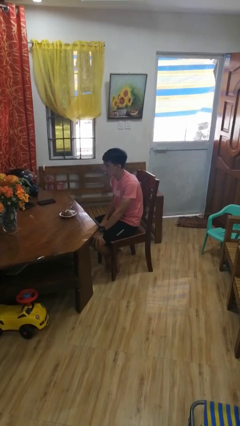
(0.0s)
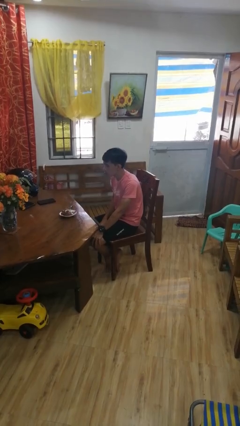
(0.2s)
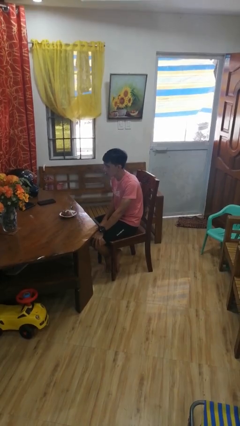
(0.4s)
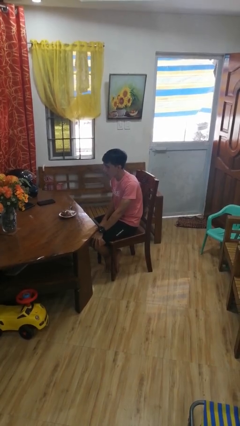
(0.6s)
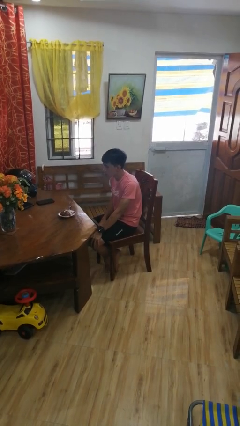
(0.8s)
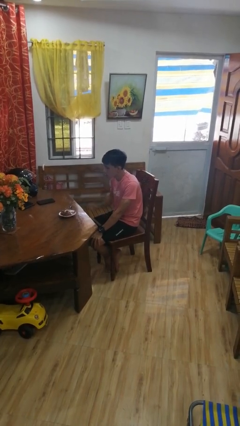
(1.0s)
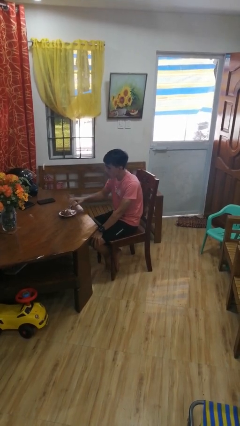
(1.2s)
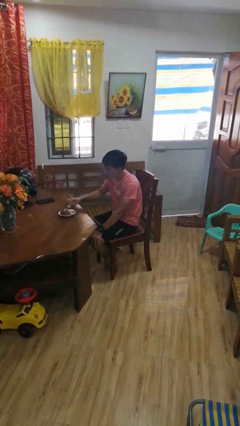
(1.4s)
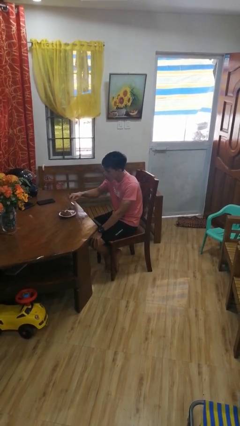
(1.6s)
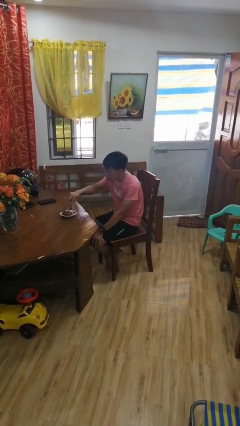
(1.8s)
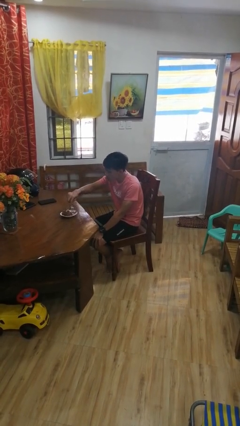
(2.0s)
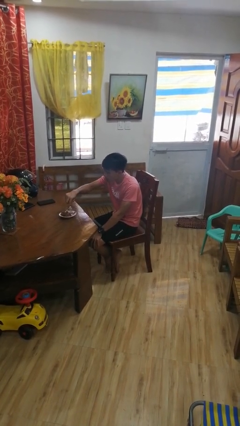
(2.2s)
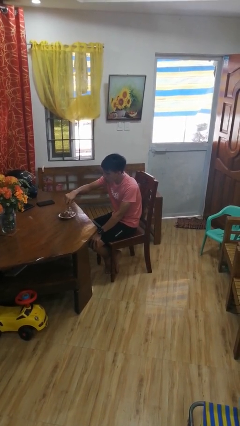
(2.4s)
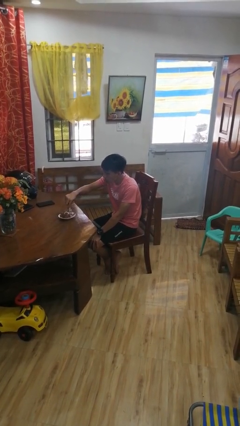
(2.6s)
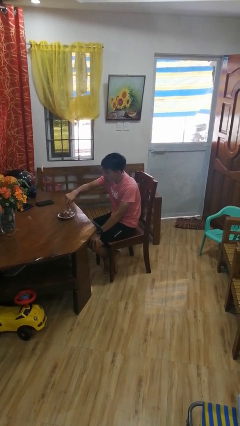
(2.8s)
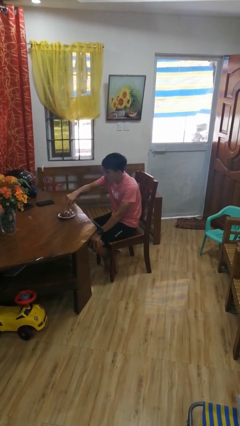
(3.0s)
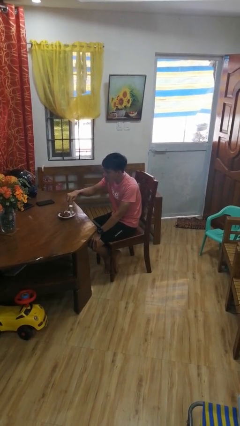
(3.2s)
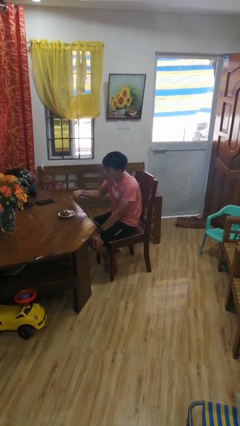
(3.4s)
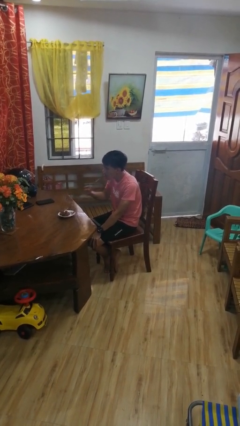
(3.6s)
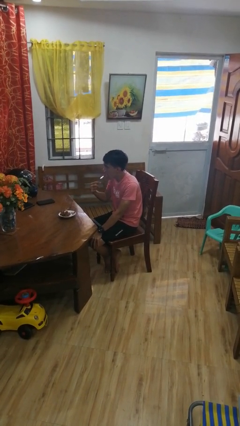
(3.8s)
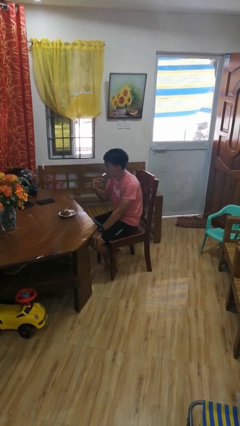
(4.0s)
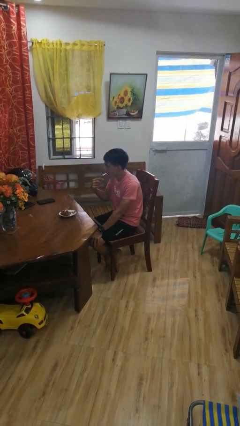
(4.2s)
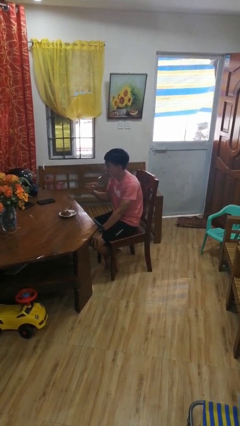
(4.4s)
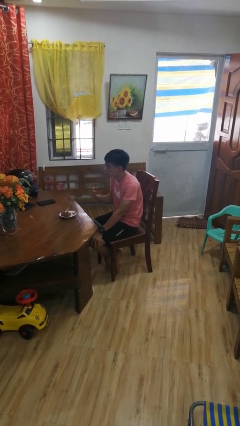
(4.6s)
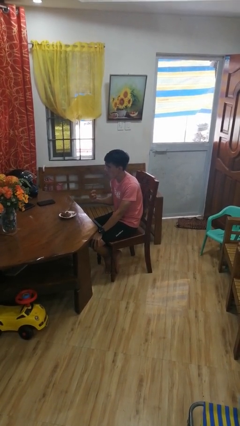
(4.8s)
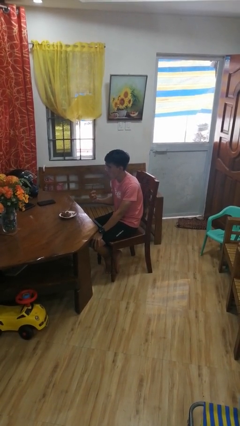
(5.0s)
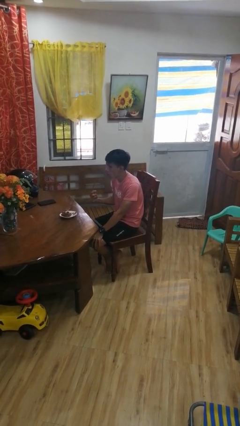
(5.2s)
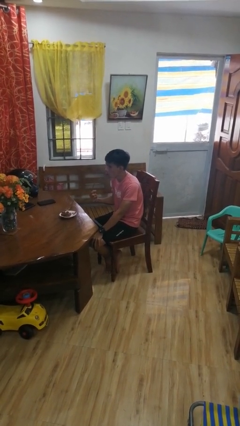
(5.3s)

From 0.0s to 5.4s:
person eats with utensil

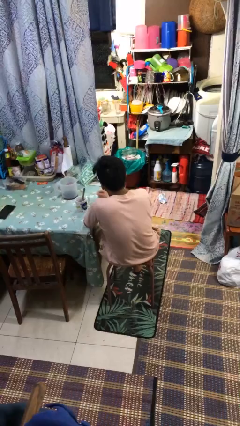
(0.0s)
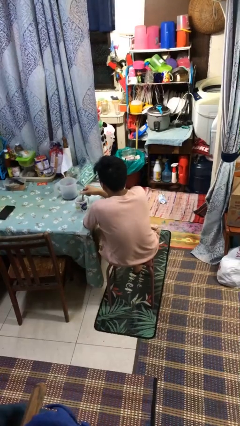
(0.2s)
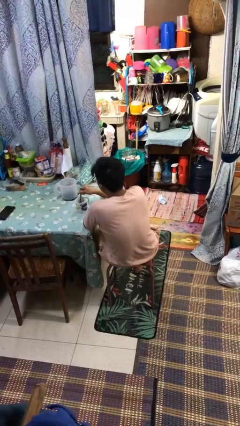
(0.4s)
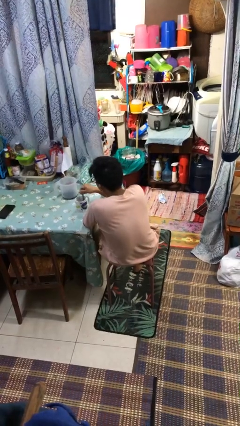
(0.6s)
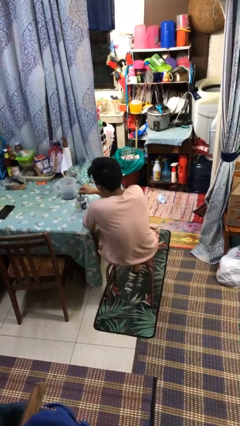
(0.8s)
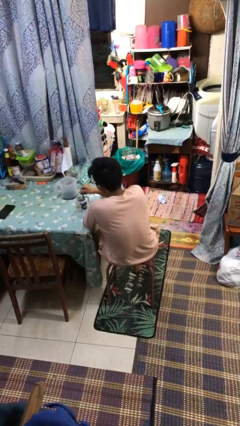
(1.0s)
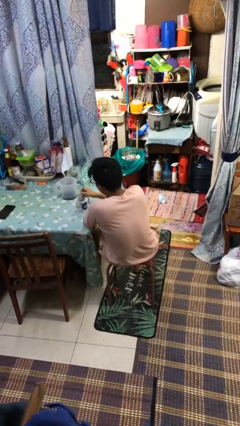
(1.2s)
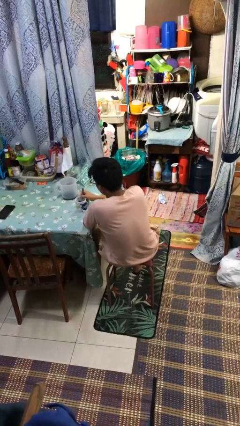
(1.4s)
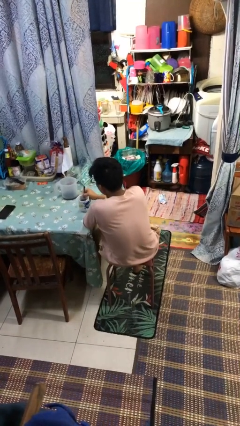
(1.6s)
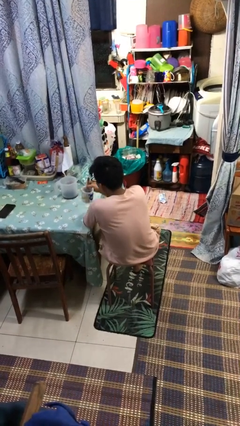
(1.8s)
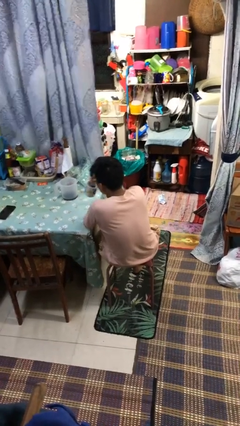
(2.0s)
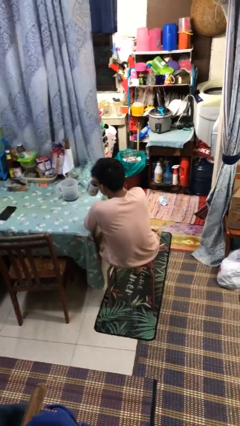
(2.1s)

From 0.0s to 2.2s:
person stirs mug

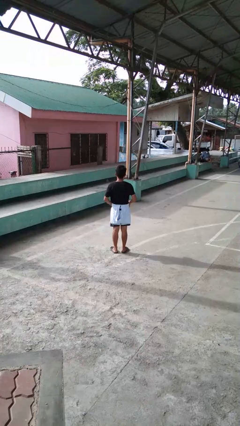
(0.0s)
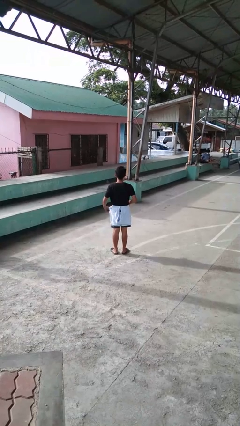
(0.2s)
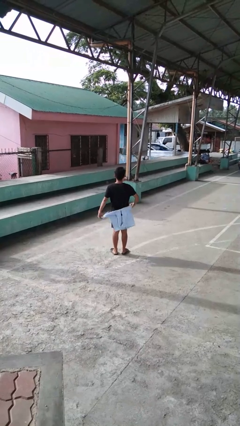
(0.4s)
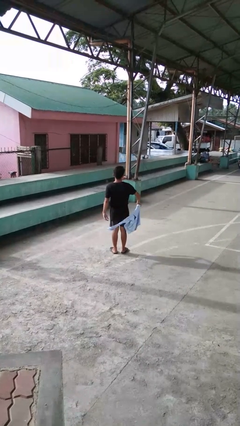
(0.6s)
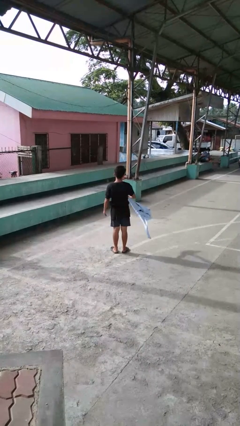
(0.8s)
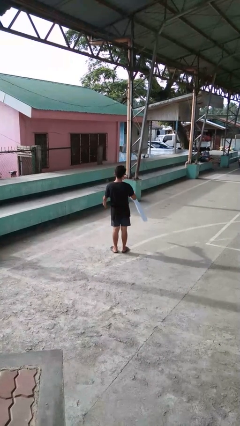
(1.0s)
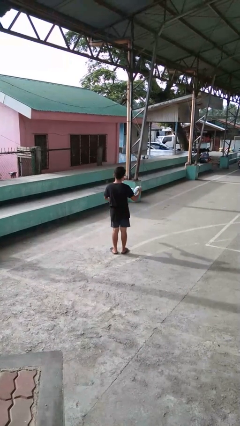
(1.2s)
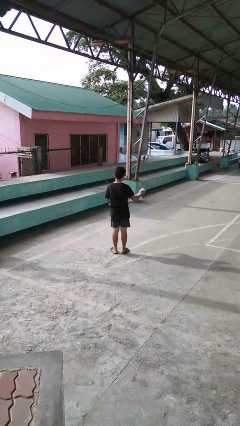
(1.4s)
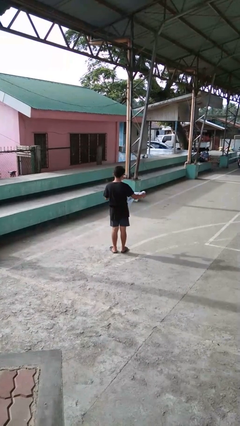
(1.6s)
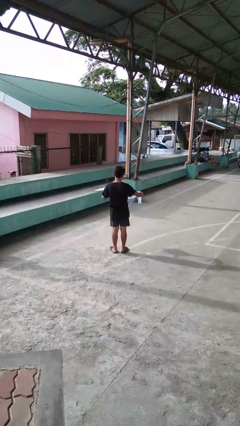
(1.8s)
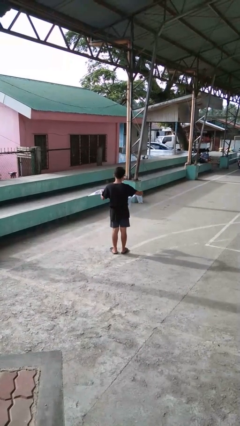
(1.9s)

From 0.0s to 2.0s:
person unties jacket around waist

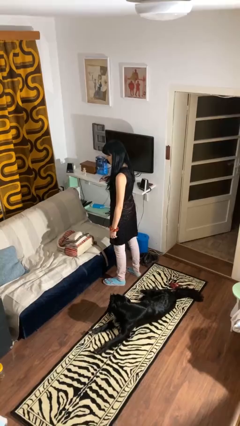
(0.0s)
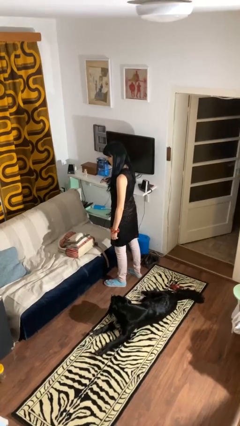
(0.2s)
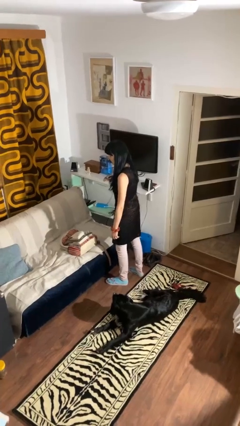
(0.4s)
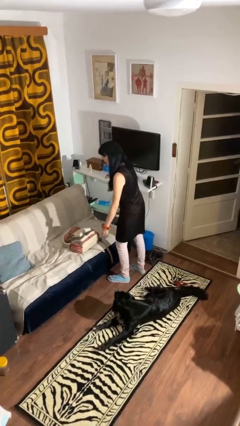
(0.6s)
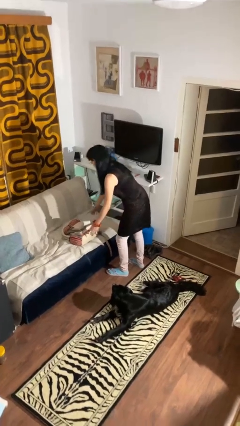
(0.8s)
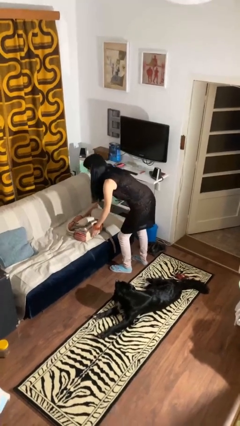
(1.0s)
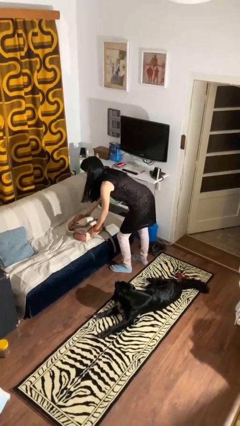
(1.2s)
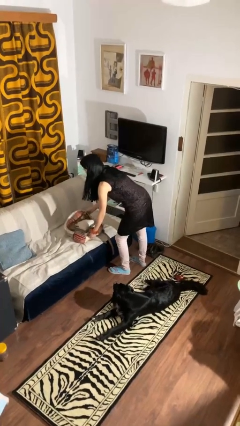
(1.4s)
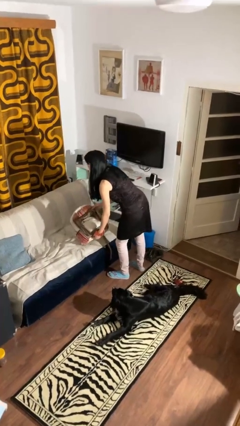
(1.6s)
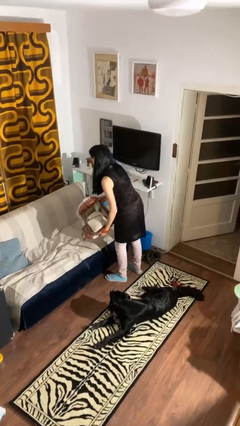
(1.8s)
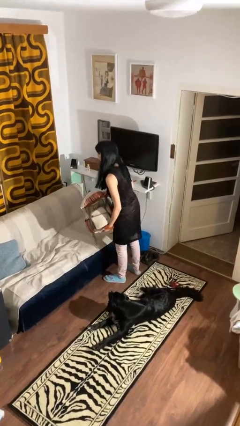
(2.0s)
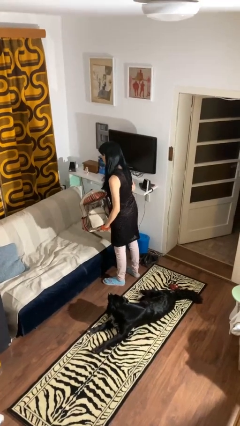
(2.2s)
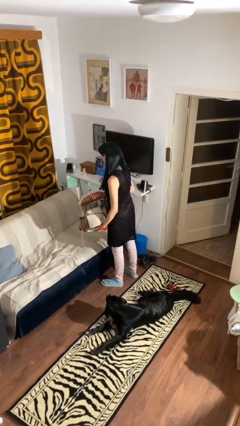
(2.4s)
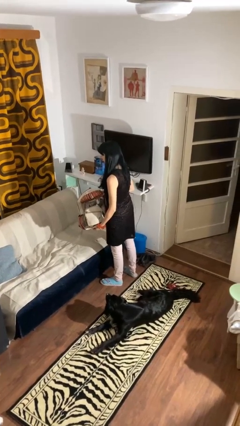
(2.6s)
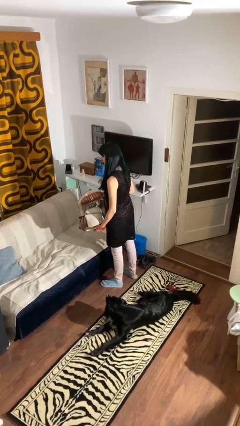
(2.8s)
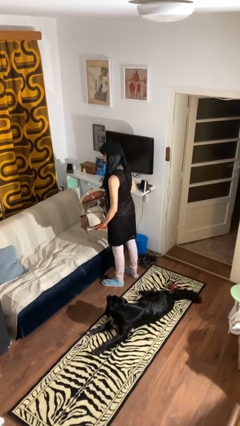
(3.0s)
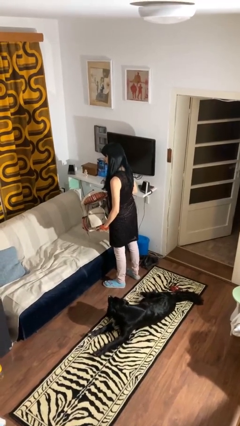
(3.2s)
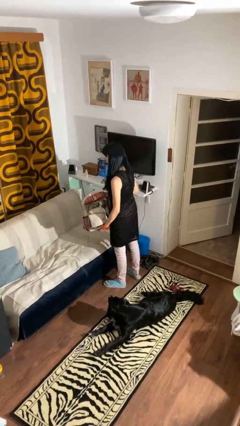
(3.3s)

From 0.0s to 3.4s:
person picks up object from couch

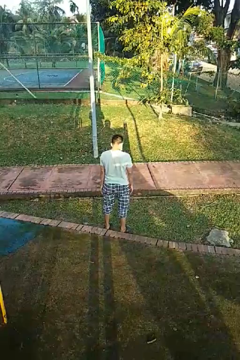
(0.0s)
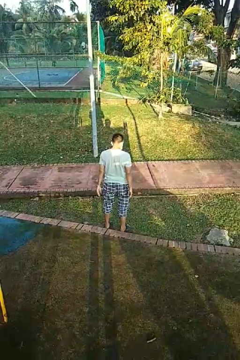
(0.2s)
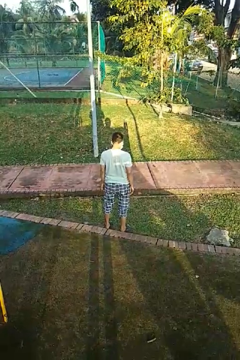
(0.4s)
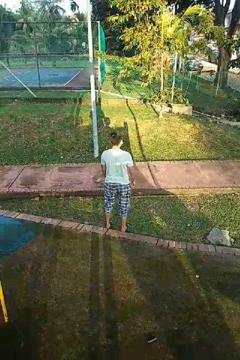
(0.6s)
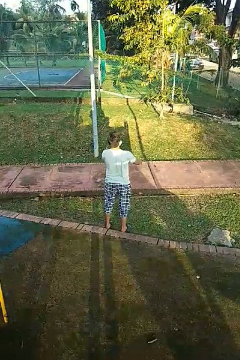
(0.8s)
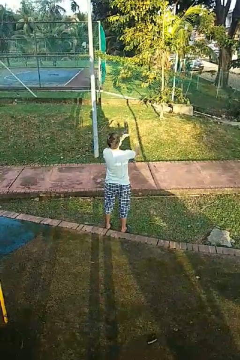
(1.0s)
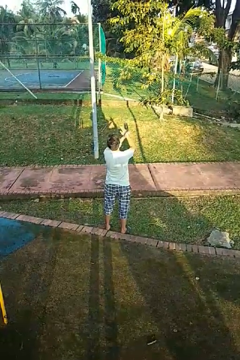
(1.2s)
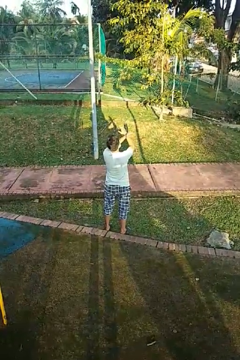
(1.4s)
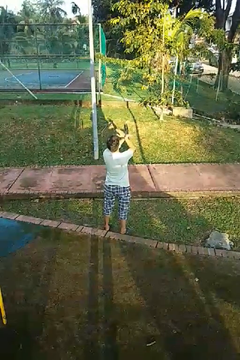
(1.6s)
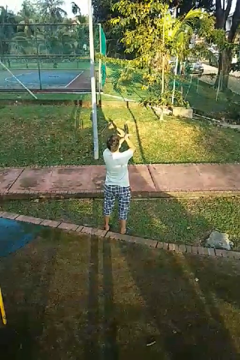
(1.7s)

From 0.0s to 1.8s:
person gestures arms x

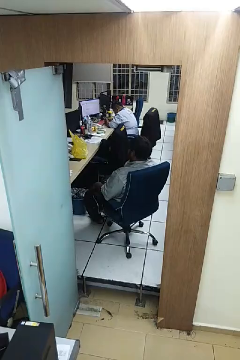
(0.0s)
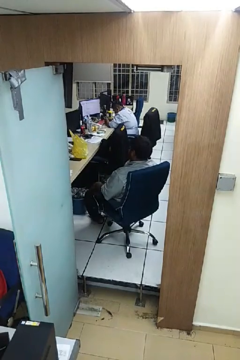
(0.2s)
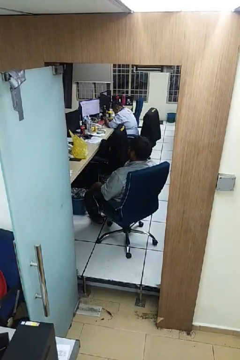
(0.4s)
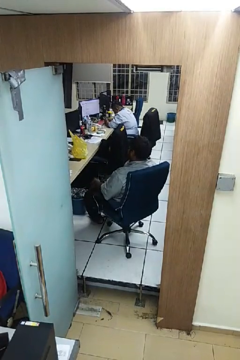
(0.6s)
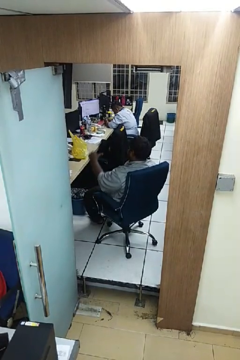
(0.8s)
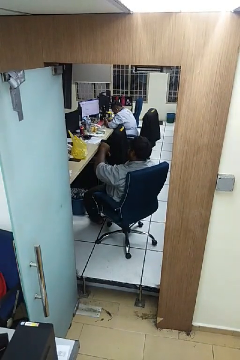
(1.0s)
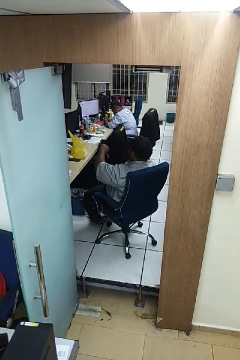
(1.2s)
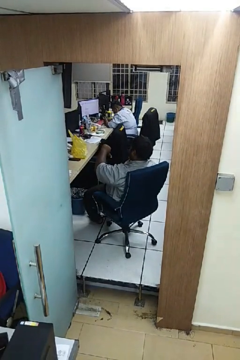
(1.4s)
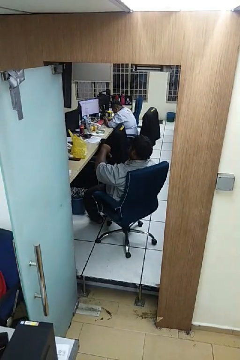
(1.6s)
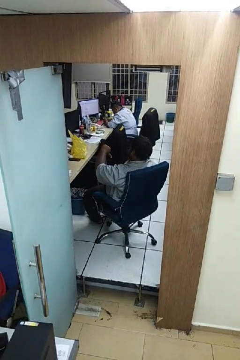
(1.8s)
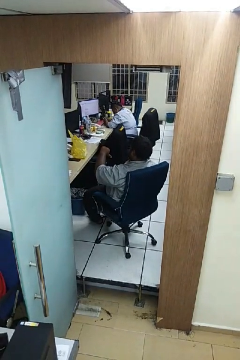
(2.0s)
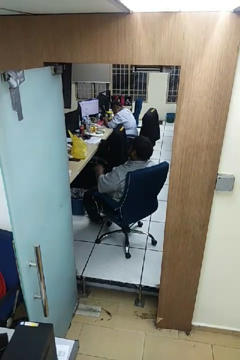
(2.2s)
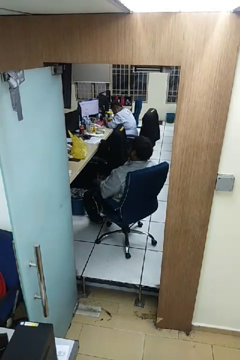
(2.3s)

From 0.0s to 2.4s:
person gestures thumbs down

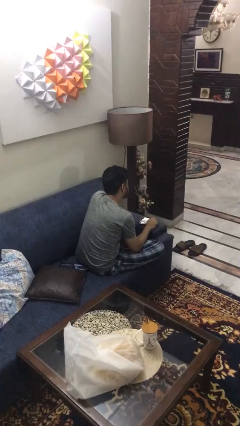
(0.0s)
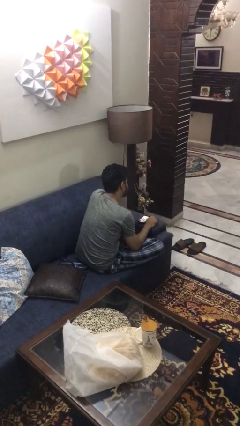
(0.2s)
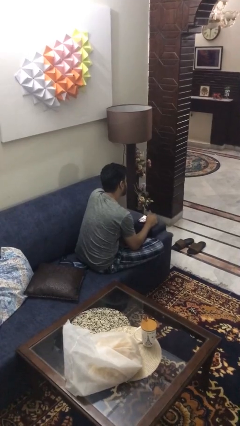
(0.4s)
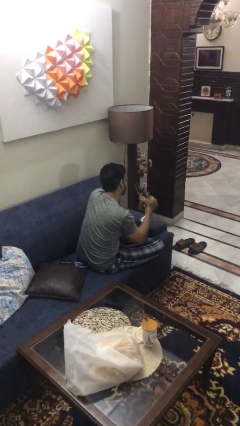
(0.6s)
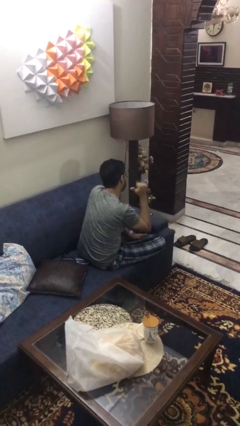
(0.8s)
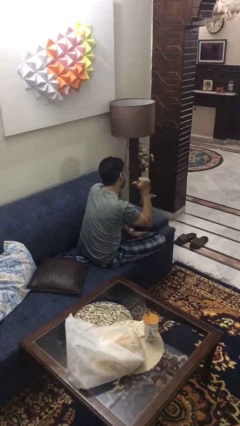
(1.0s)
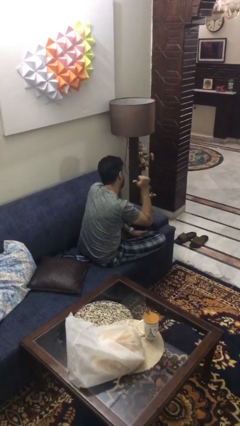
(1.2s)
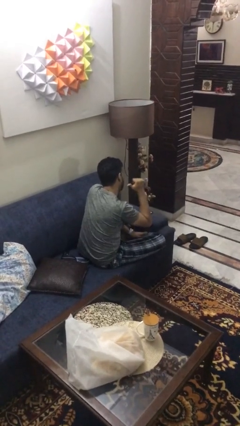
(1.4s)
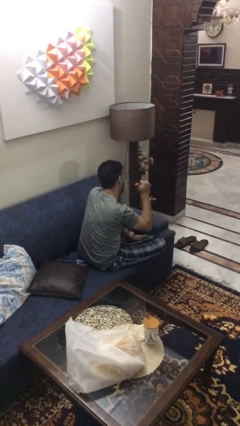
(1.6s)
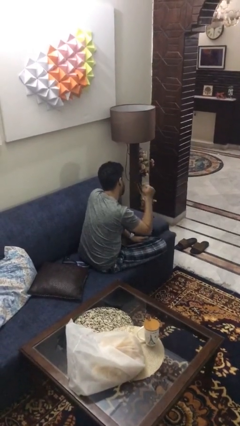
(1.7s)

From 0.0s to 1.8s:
person gestures behind me
